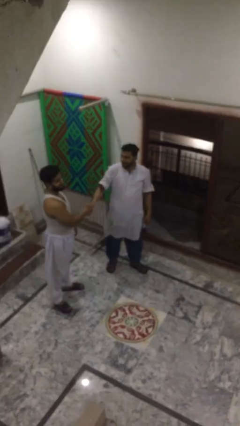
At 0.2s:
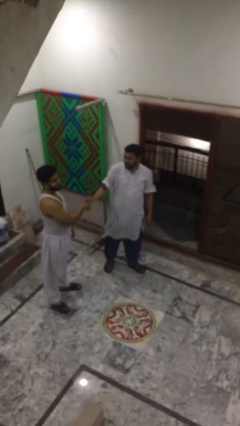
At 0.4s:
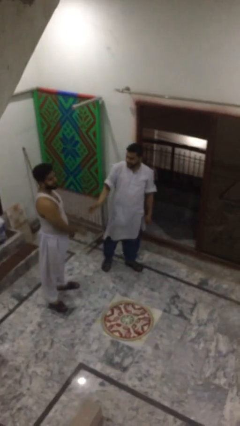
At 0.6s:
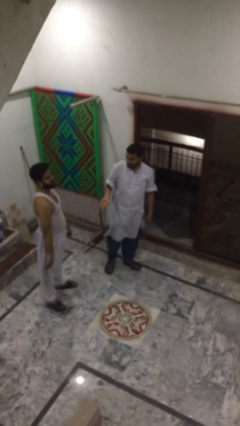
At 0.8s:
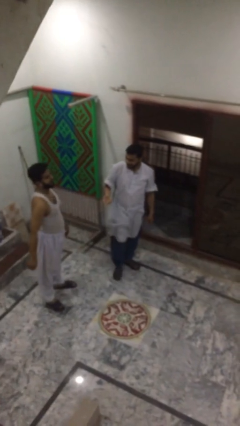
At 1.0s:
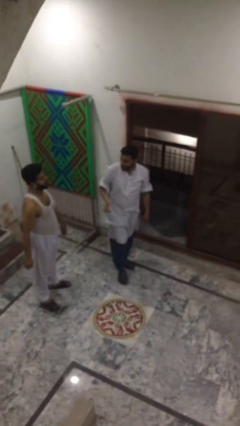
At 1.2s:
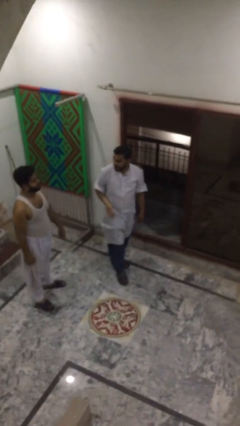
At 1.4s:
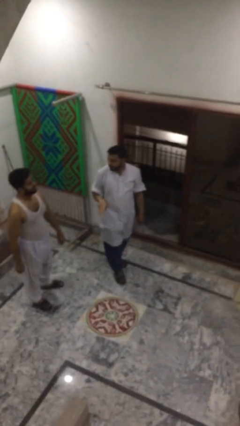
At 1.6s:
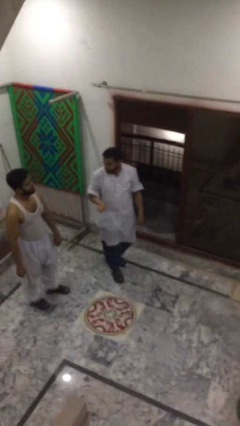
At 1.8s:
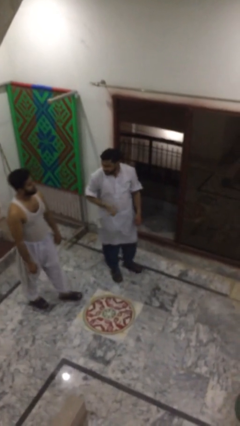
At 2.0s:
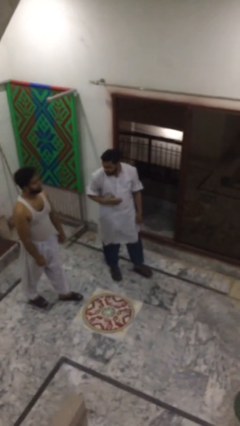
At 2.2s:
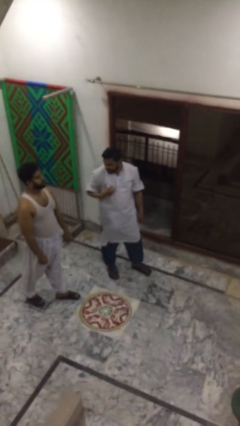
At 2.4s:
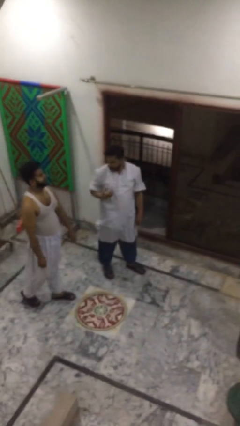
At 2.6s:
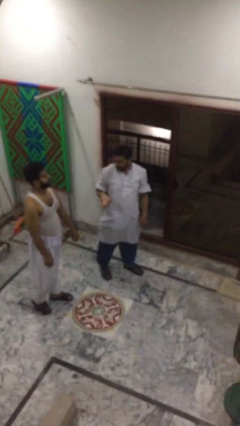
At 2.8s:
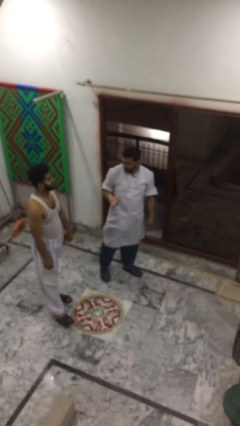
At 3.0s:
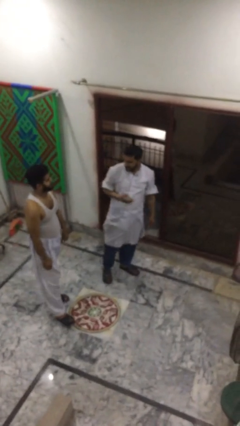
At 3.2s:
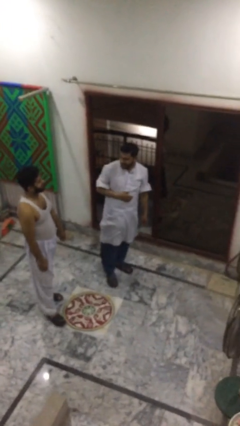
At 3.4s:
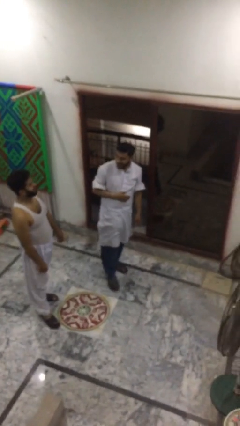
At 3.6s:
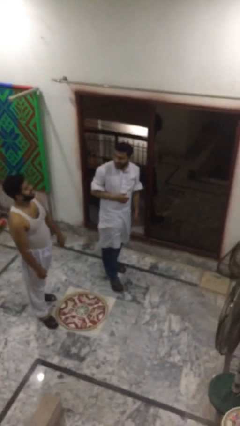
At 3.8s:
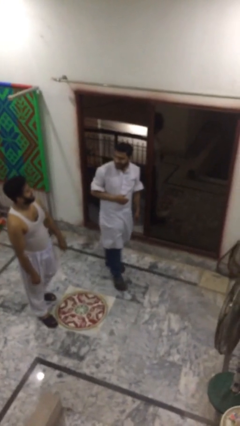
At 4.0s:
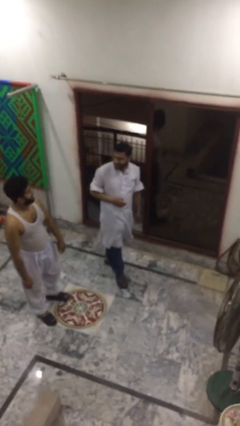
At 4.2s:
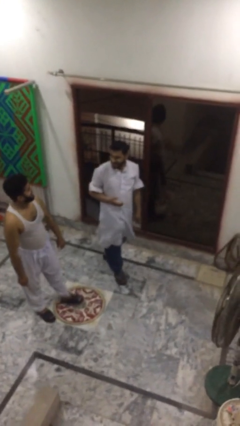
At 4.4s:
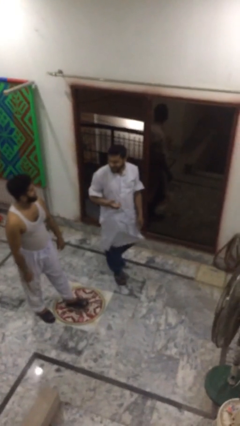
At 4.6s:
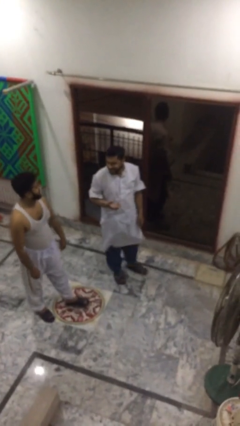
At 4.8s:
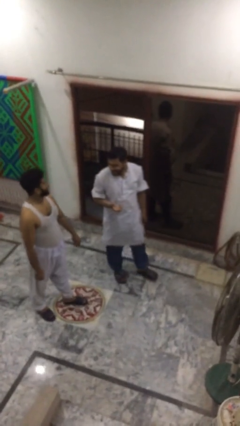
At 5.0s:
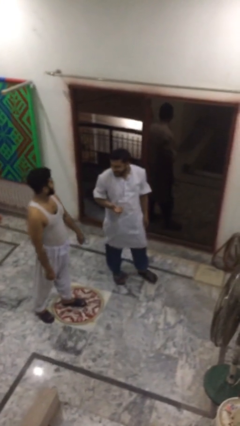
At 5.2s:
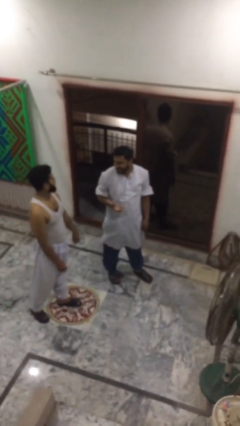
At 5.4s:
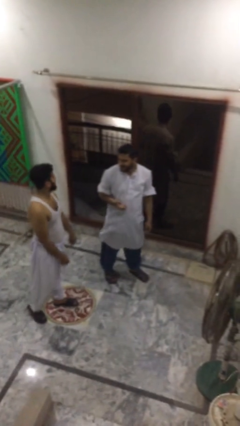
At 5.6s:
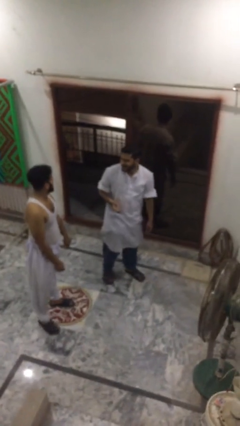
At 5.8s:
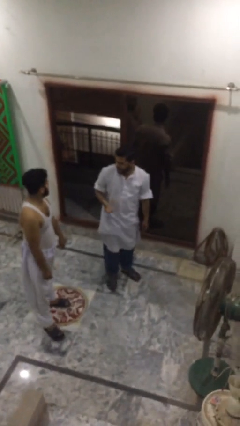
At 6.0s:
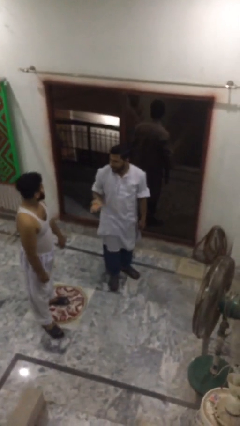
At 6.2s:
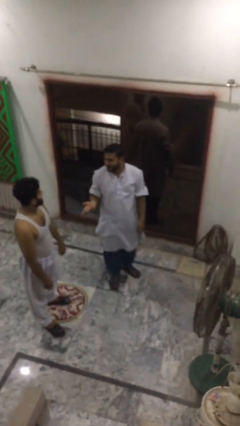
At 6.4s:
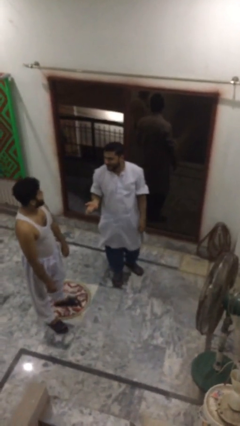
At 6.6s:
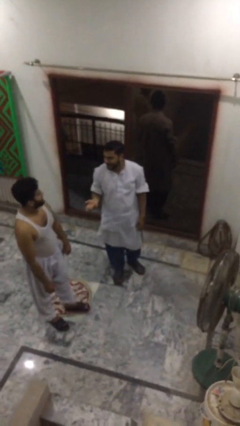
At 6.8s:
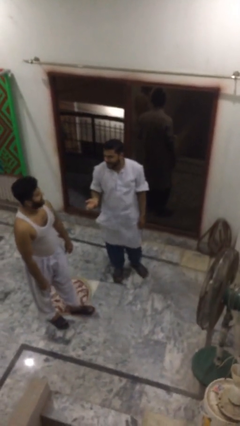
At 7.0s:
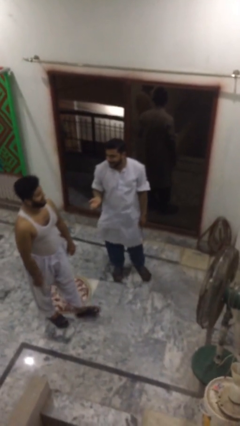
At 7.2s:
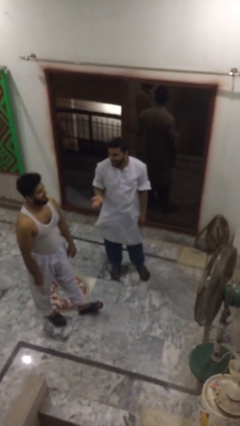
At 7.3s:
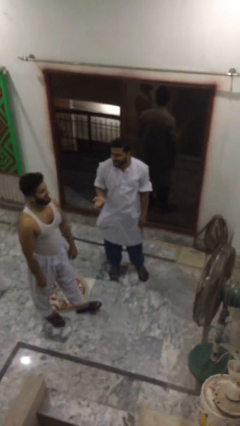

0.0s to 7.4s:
person talks to person

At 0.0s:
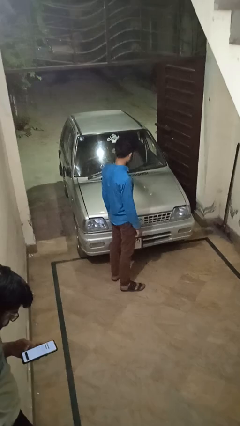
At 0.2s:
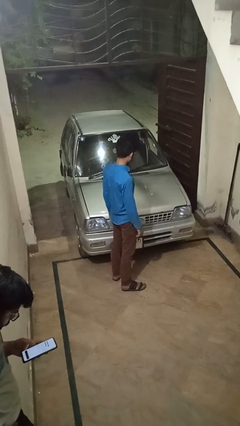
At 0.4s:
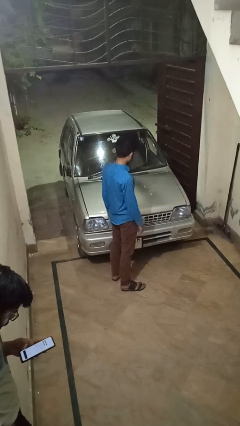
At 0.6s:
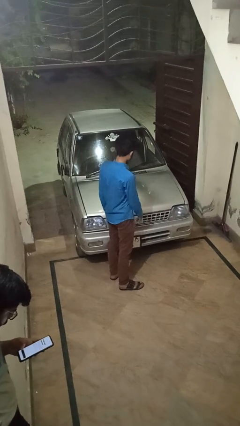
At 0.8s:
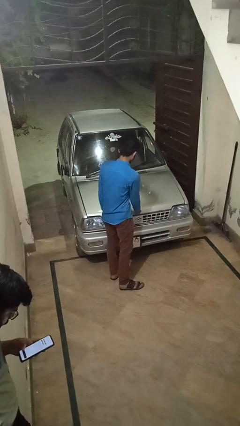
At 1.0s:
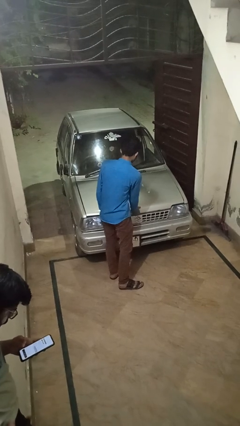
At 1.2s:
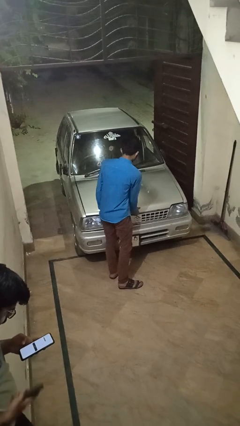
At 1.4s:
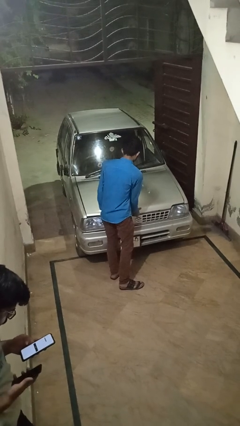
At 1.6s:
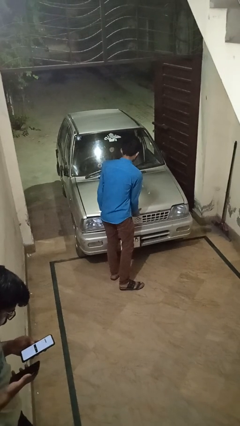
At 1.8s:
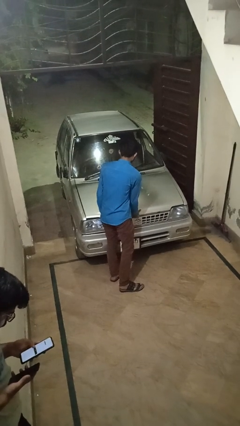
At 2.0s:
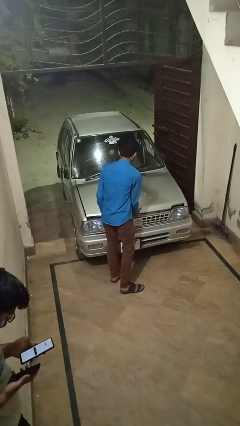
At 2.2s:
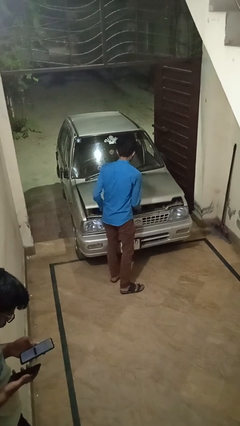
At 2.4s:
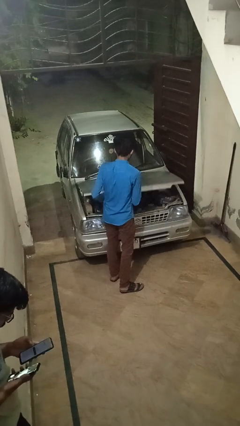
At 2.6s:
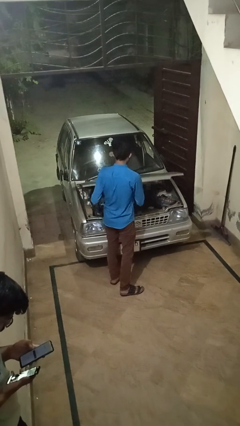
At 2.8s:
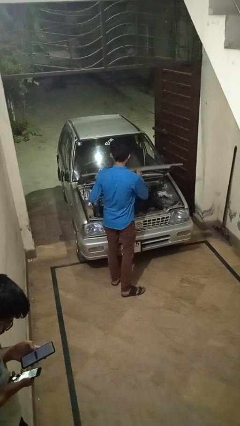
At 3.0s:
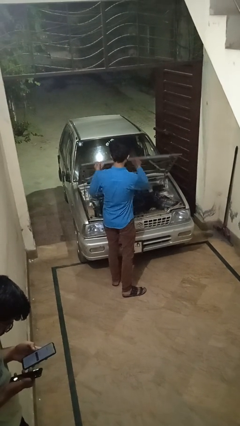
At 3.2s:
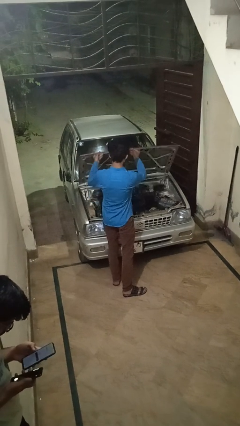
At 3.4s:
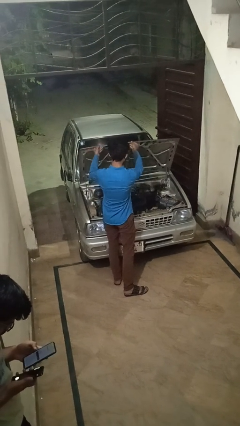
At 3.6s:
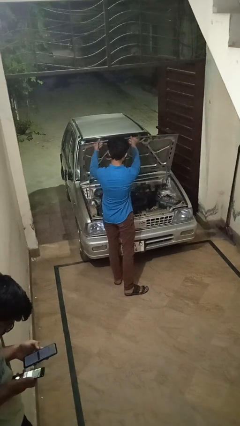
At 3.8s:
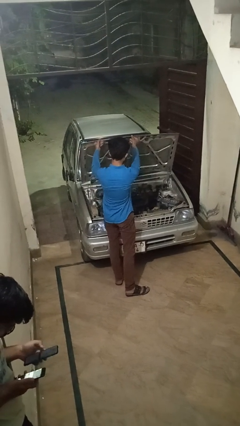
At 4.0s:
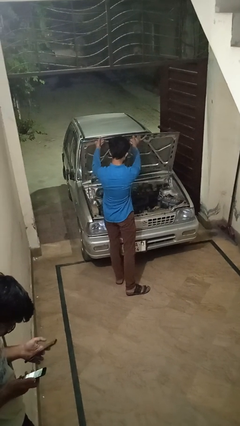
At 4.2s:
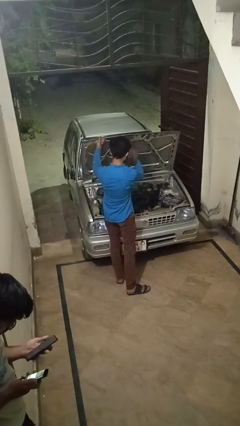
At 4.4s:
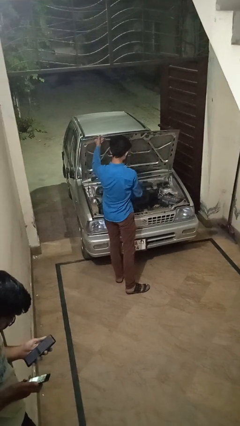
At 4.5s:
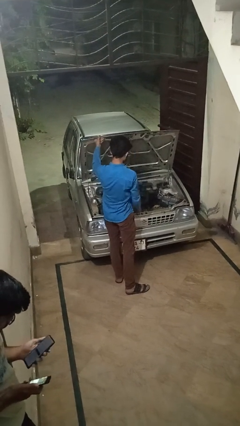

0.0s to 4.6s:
person opens car hood

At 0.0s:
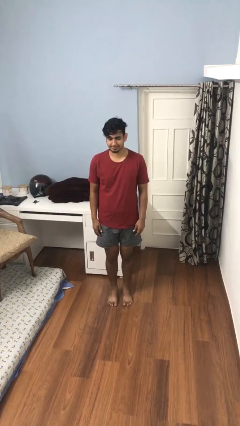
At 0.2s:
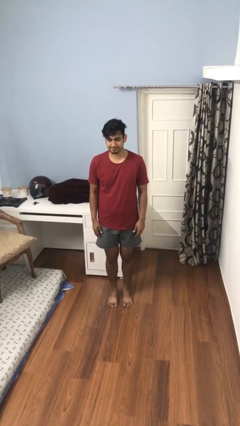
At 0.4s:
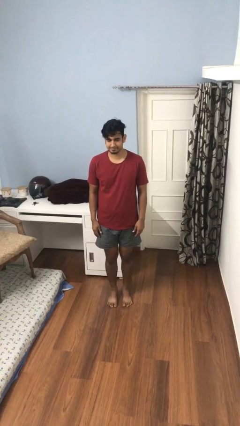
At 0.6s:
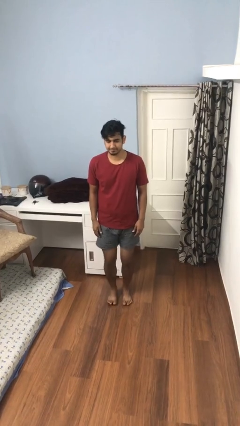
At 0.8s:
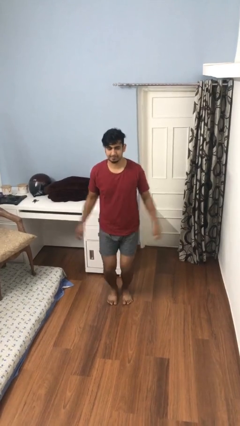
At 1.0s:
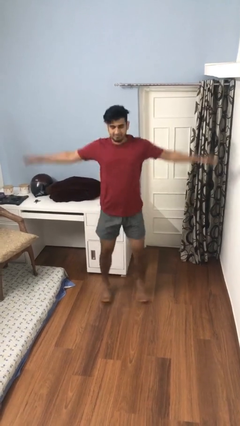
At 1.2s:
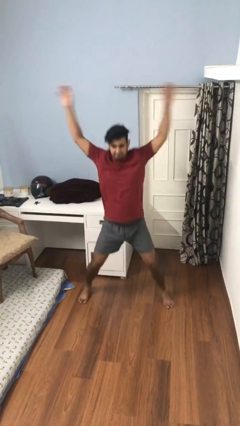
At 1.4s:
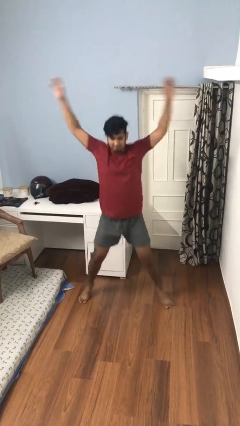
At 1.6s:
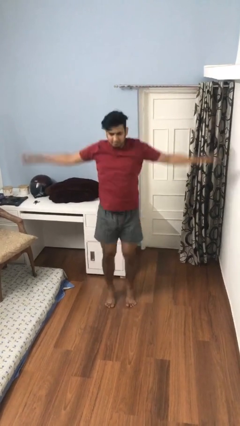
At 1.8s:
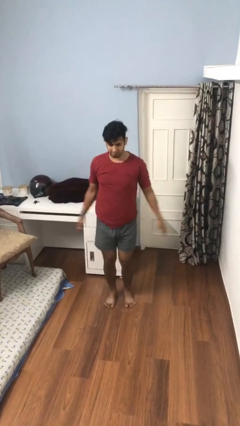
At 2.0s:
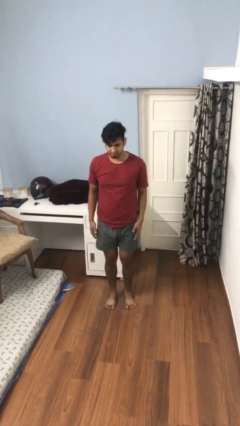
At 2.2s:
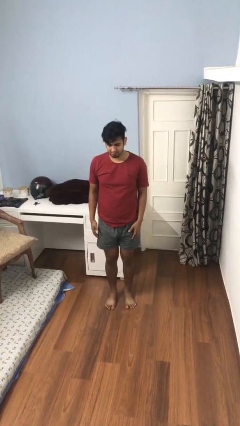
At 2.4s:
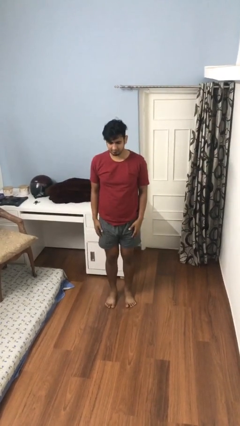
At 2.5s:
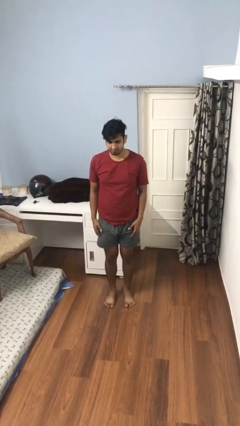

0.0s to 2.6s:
person exercises with jumping jacks

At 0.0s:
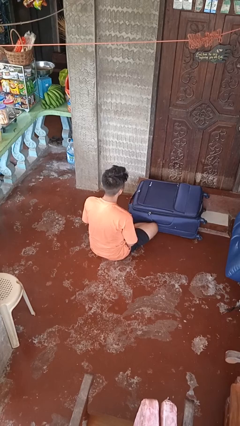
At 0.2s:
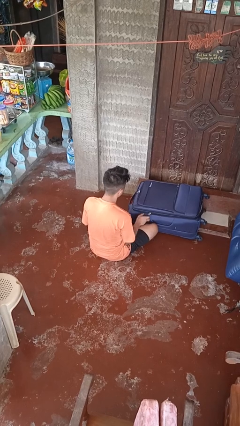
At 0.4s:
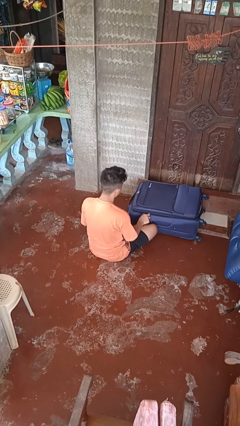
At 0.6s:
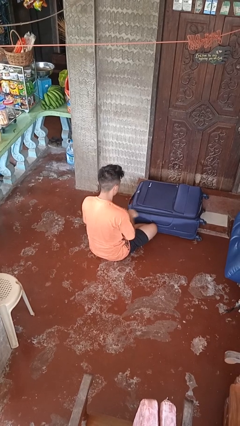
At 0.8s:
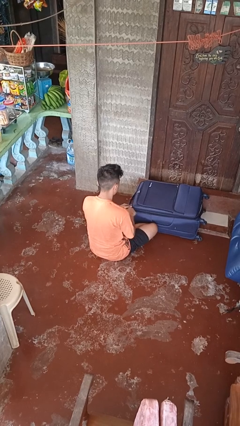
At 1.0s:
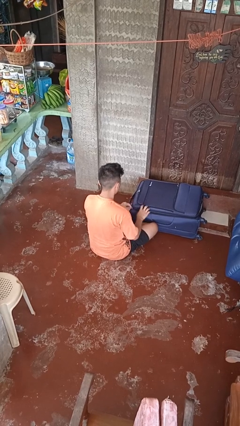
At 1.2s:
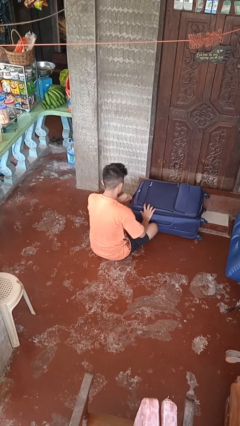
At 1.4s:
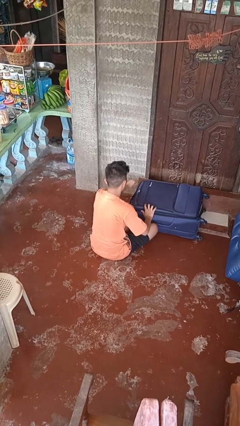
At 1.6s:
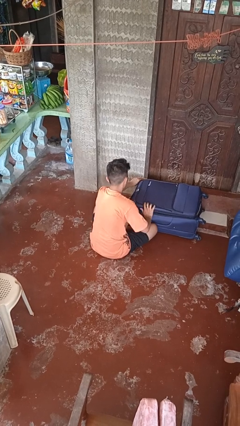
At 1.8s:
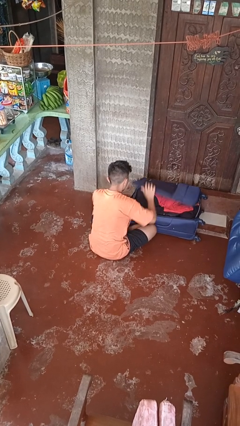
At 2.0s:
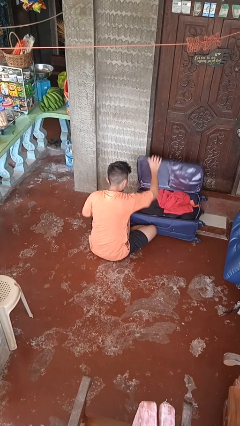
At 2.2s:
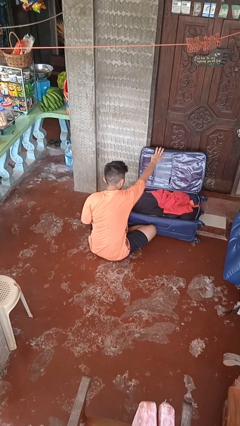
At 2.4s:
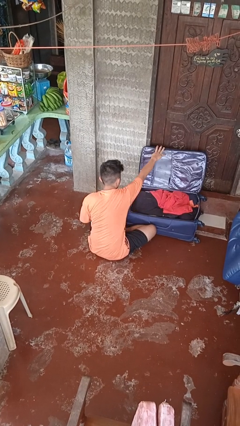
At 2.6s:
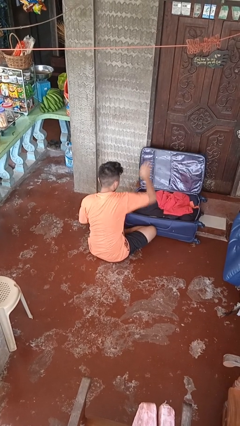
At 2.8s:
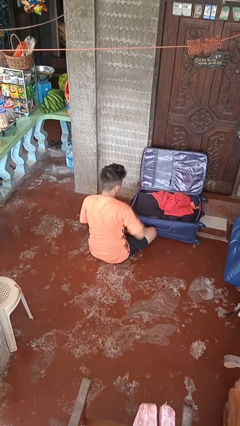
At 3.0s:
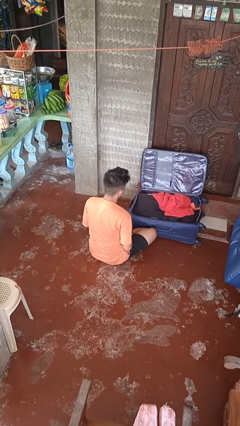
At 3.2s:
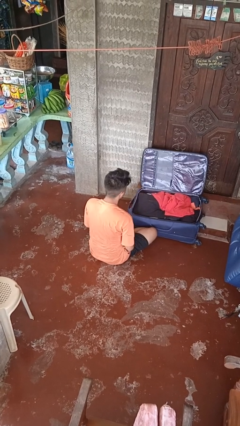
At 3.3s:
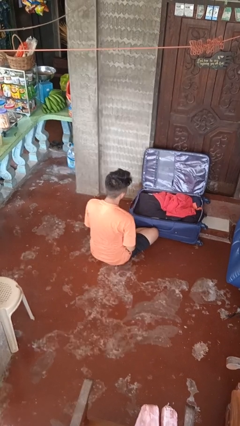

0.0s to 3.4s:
person opens suitcase
